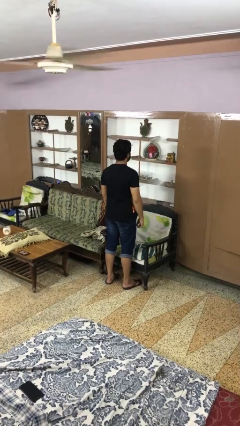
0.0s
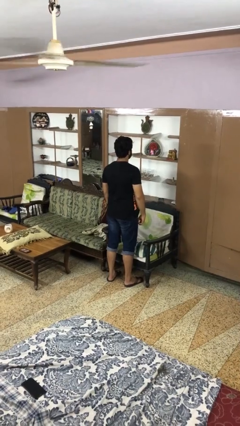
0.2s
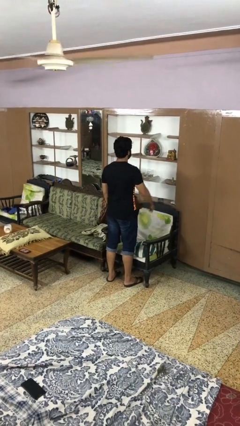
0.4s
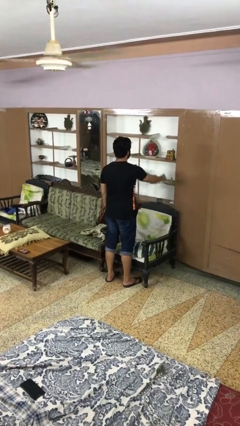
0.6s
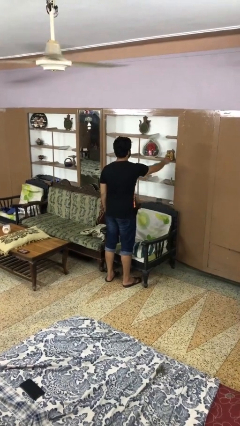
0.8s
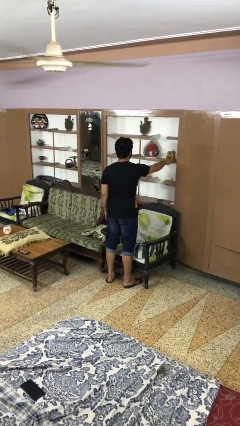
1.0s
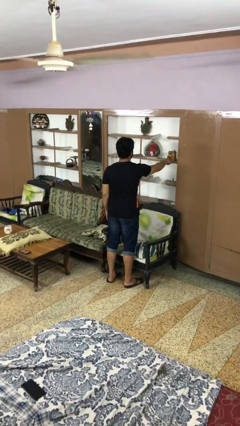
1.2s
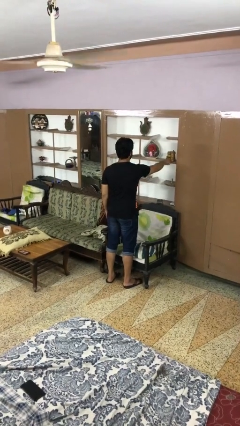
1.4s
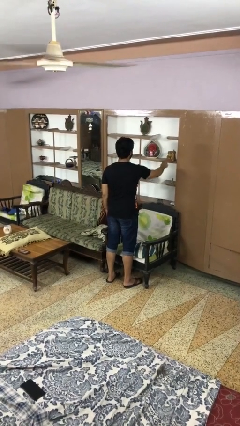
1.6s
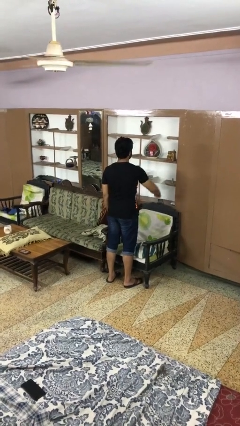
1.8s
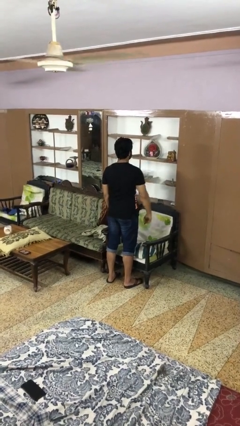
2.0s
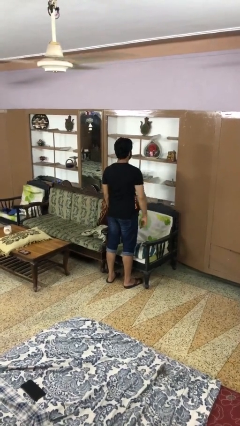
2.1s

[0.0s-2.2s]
person taps object with finger

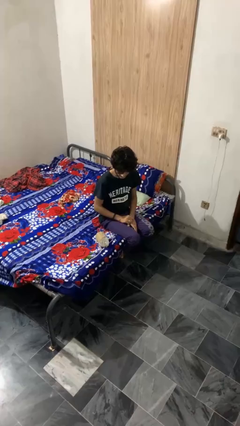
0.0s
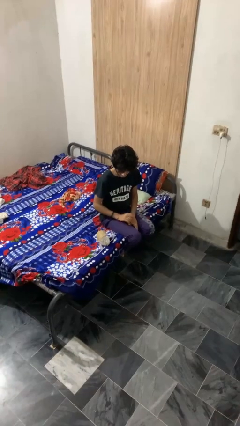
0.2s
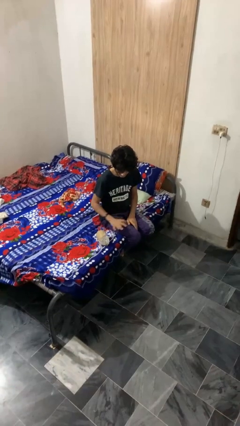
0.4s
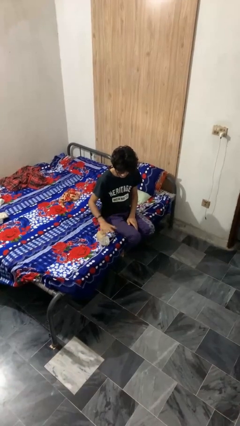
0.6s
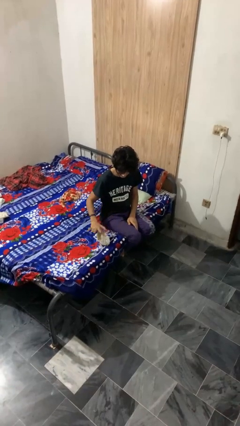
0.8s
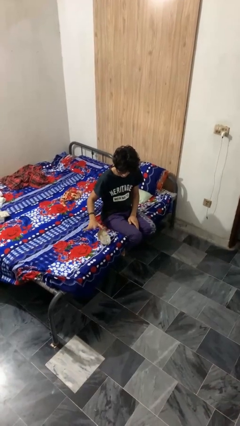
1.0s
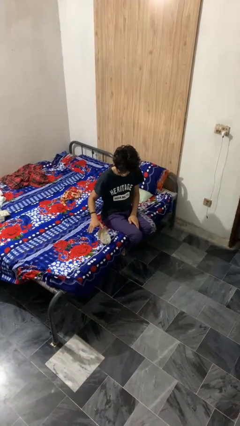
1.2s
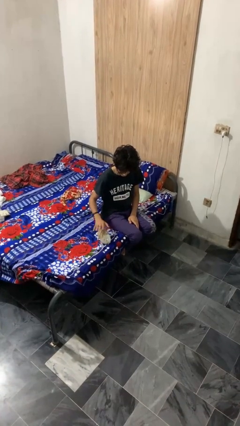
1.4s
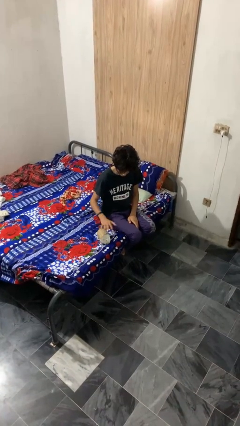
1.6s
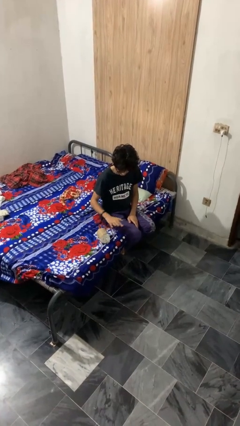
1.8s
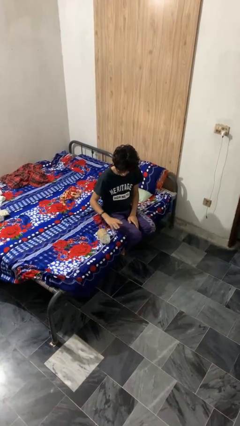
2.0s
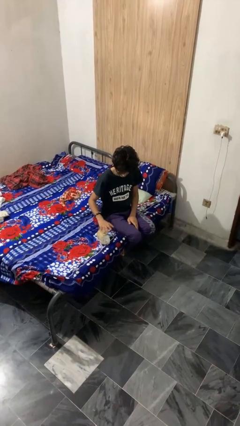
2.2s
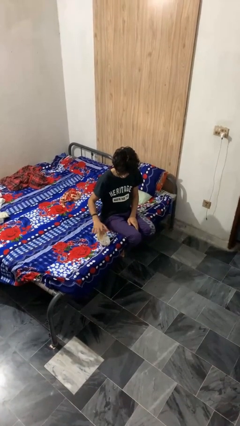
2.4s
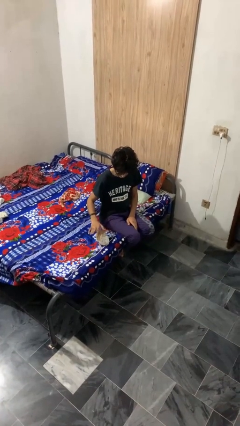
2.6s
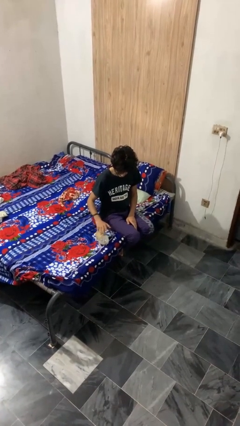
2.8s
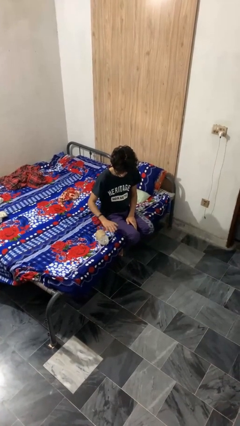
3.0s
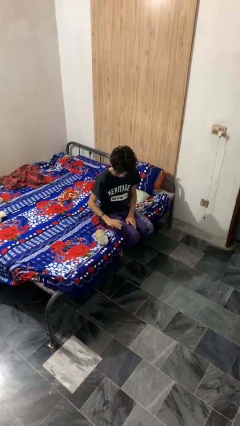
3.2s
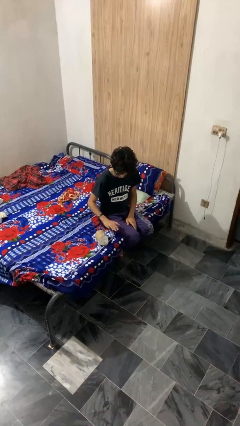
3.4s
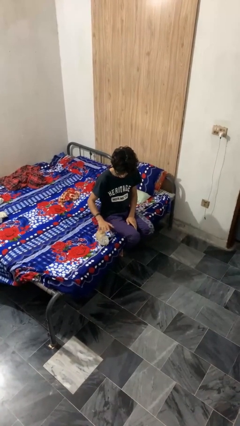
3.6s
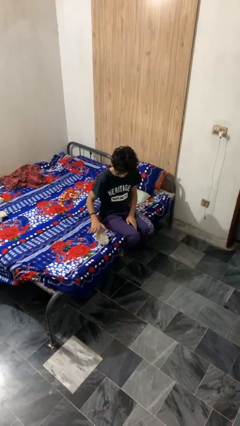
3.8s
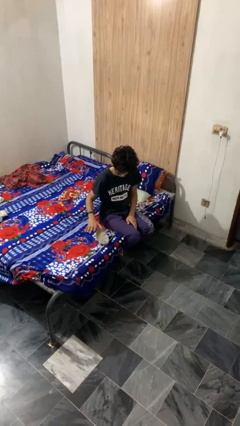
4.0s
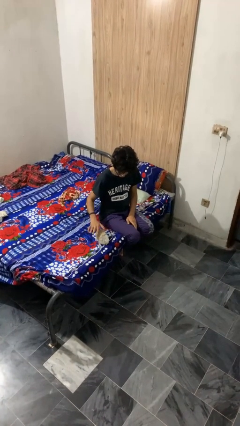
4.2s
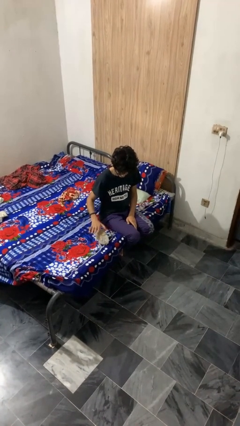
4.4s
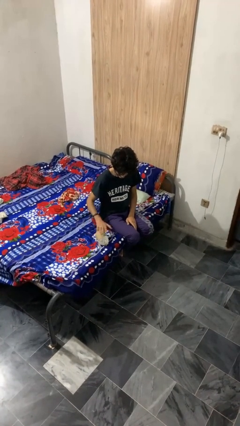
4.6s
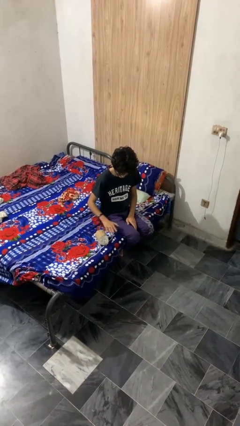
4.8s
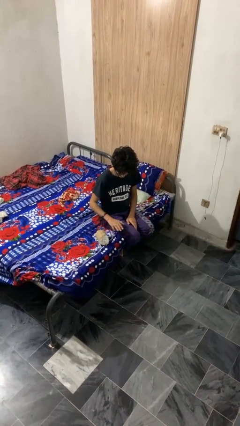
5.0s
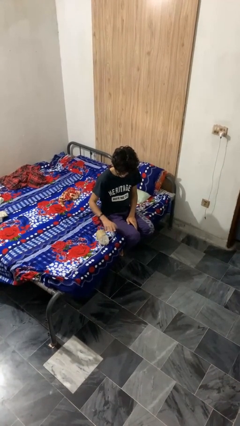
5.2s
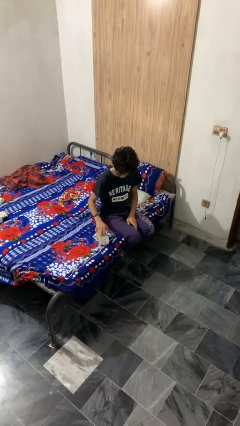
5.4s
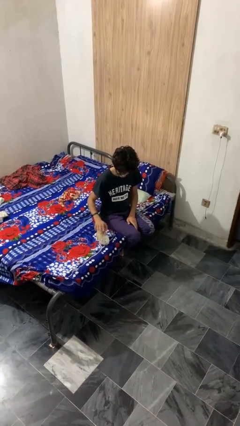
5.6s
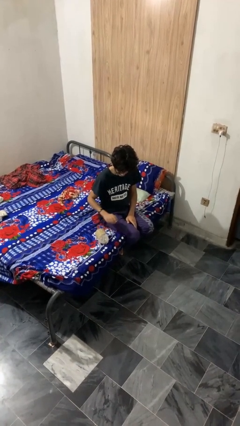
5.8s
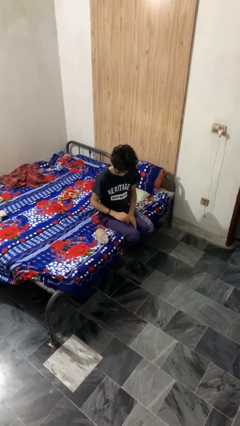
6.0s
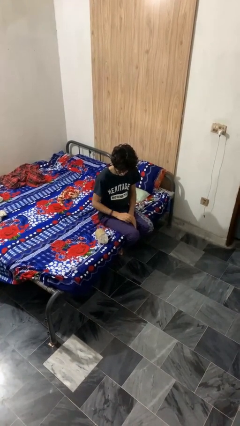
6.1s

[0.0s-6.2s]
person waves hand over object

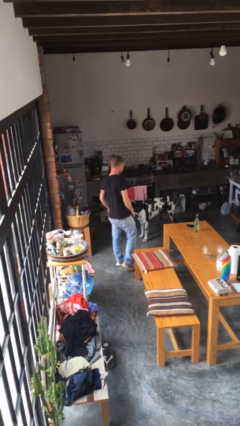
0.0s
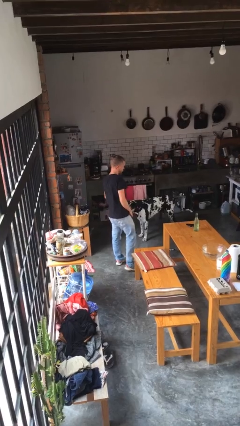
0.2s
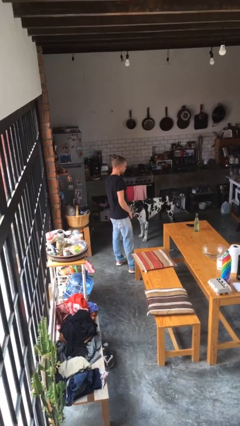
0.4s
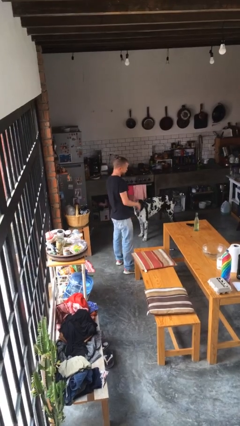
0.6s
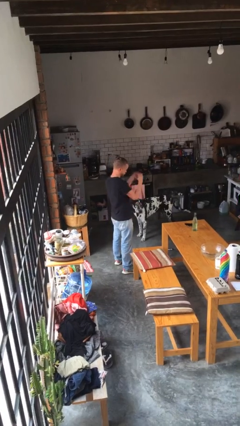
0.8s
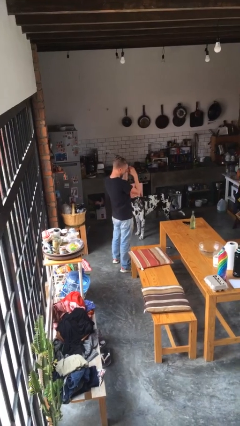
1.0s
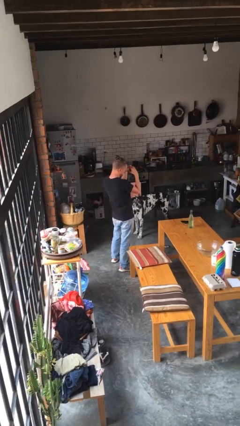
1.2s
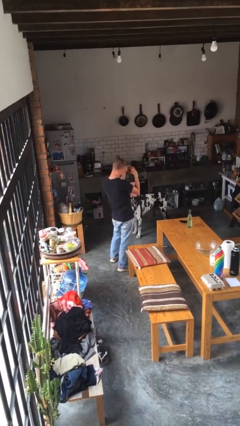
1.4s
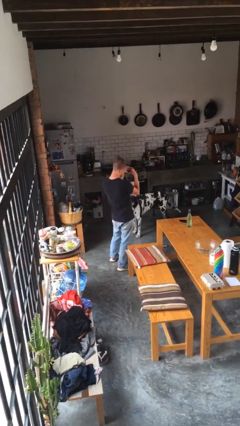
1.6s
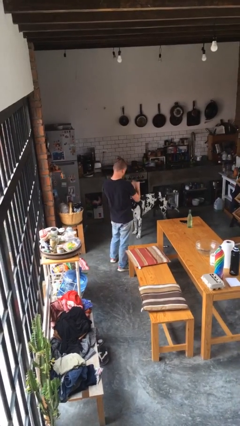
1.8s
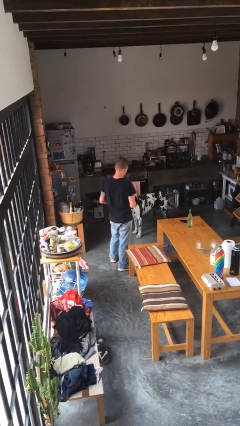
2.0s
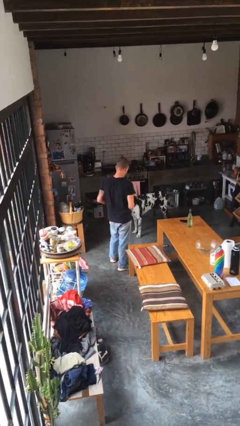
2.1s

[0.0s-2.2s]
person gestures heart

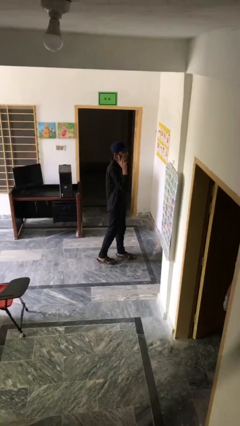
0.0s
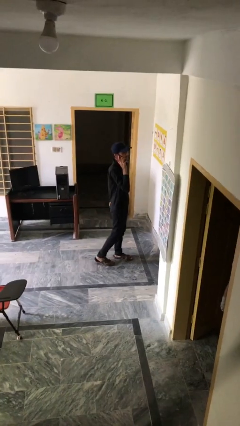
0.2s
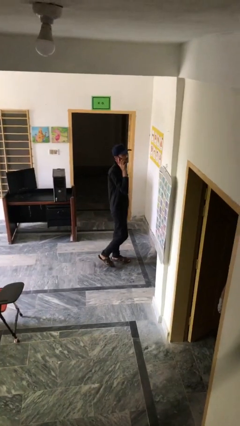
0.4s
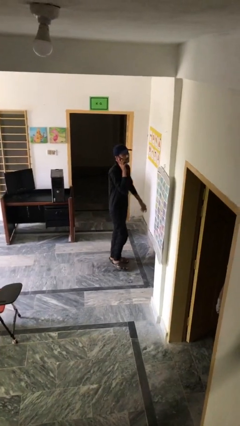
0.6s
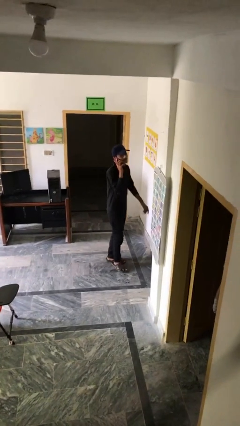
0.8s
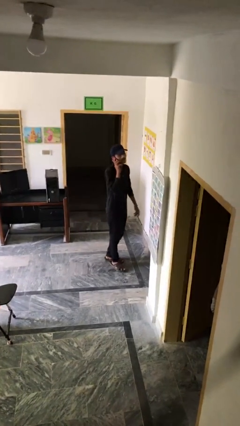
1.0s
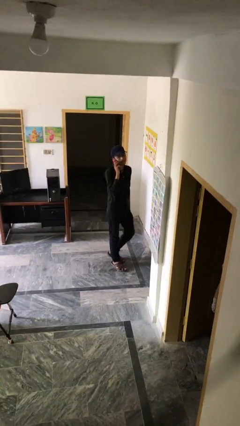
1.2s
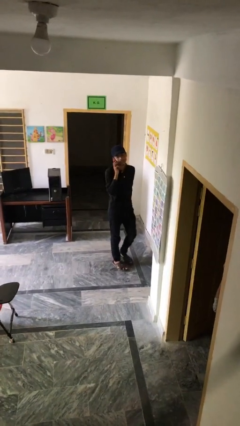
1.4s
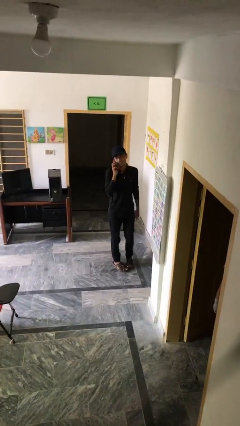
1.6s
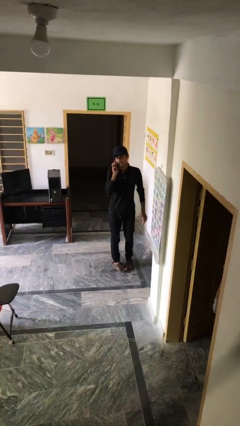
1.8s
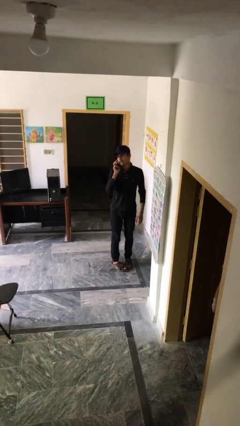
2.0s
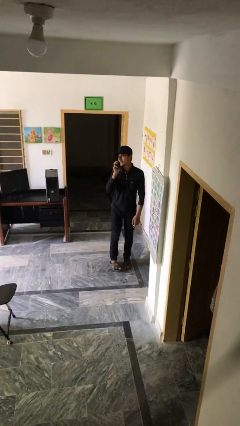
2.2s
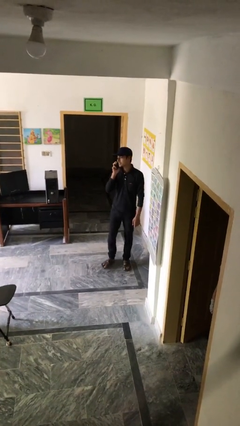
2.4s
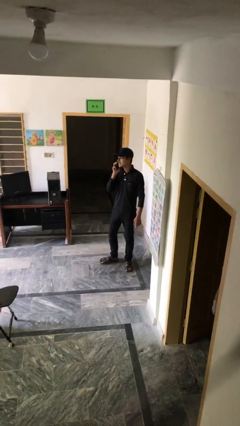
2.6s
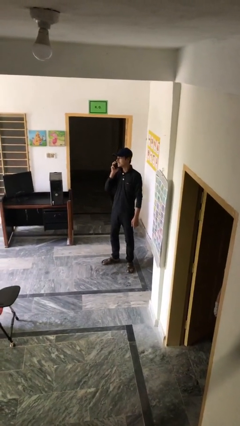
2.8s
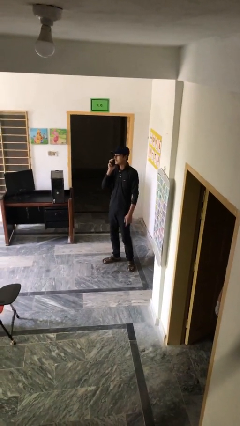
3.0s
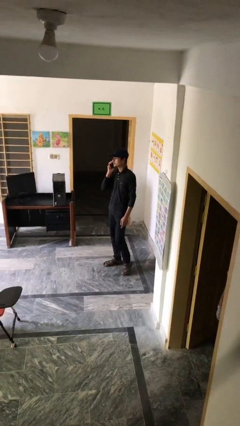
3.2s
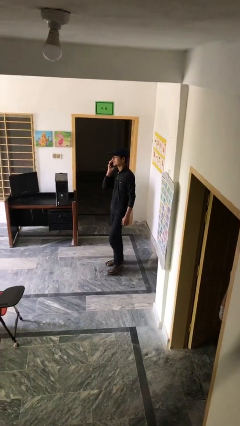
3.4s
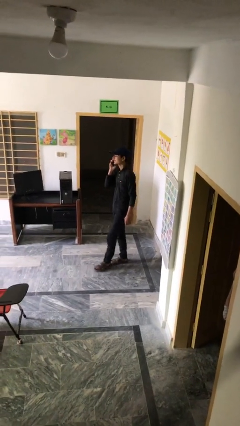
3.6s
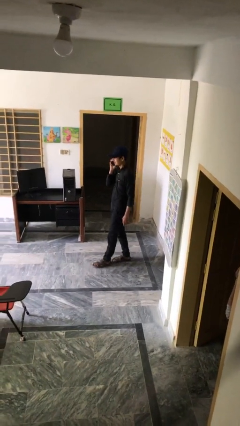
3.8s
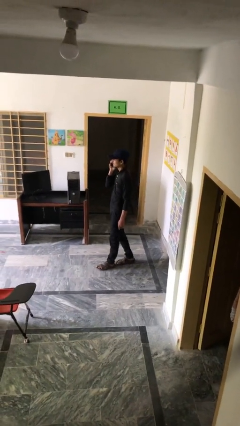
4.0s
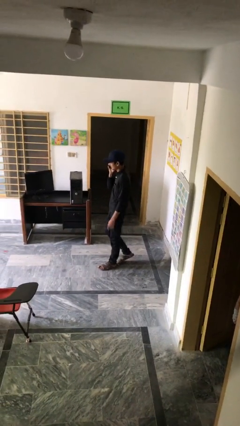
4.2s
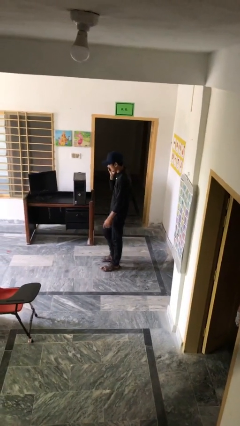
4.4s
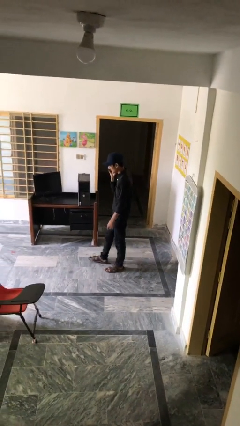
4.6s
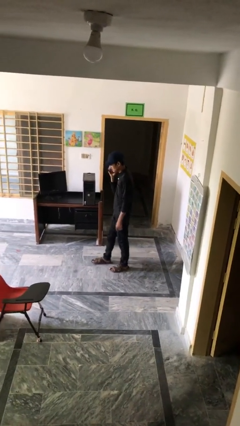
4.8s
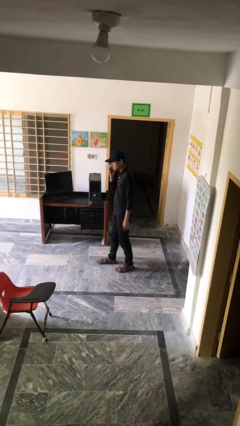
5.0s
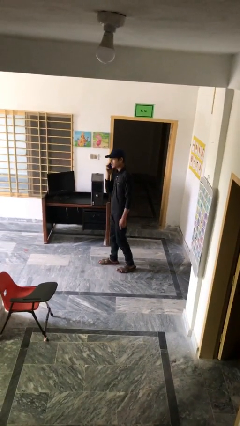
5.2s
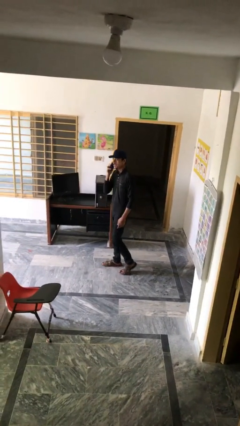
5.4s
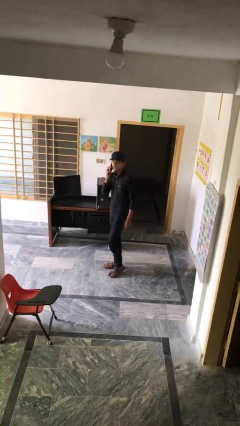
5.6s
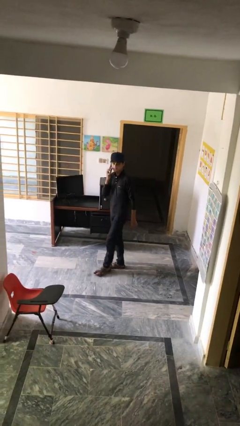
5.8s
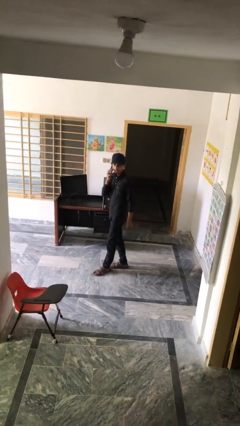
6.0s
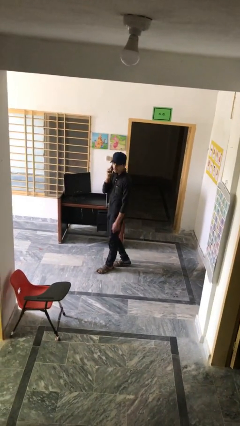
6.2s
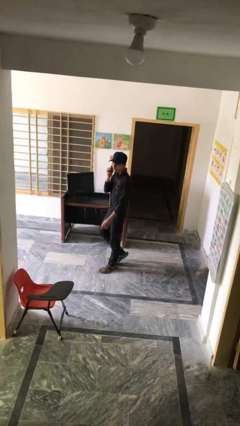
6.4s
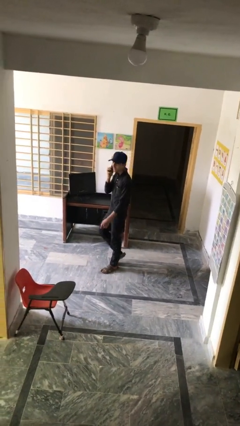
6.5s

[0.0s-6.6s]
person talks on phone

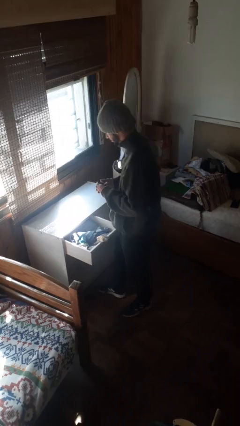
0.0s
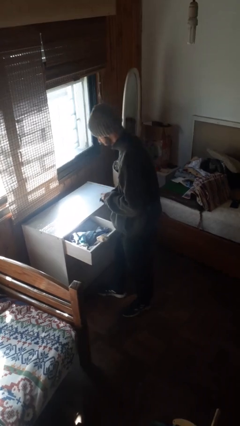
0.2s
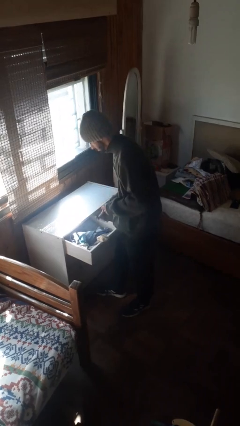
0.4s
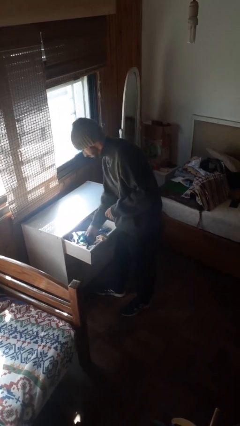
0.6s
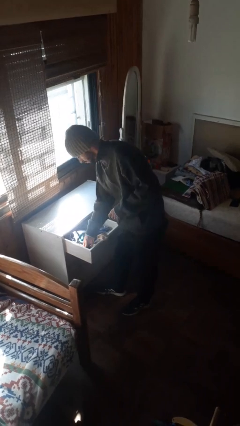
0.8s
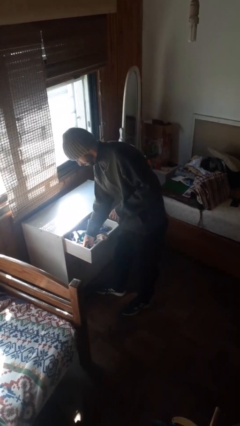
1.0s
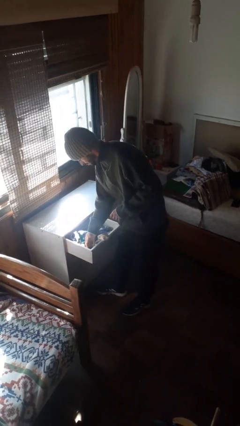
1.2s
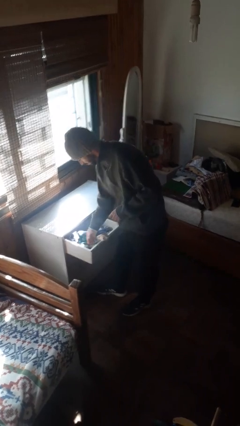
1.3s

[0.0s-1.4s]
person puts clothes into dresser
